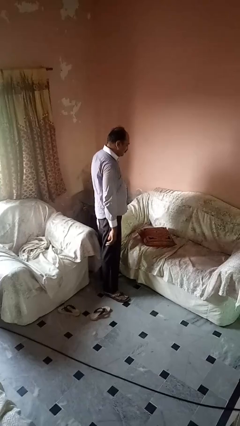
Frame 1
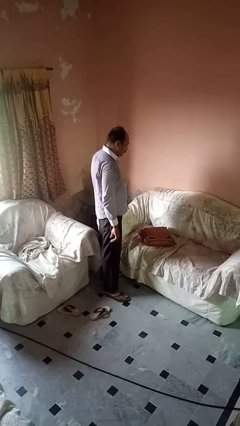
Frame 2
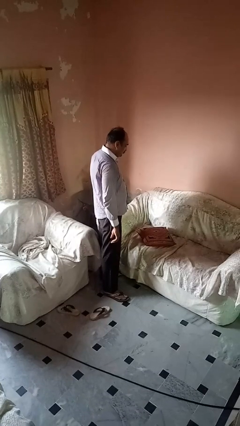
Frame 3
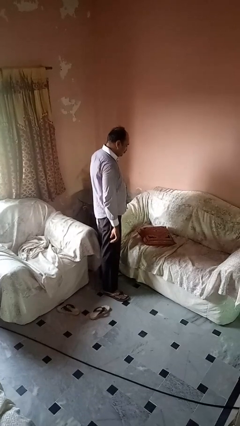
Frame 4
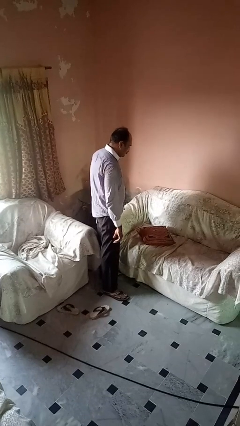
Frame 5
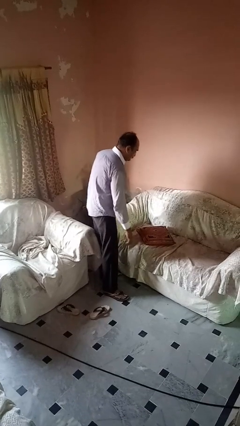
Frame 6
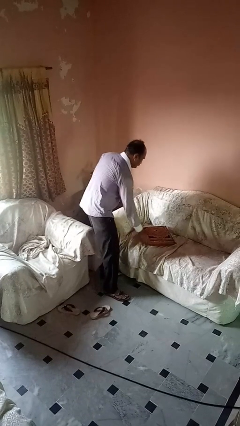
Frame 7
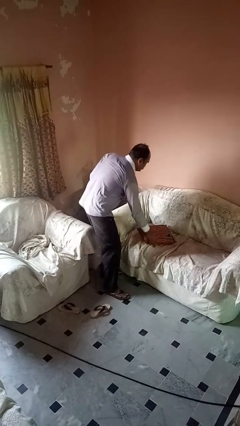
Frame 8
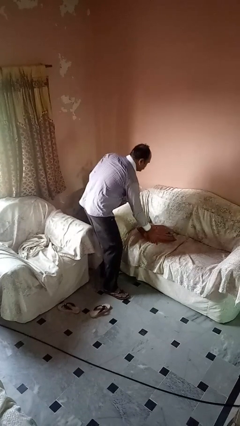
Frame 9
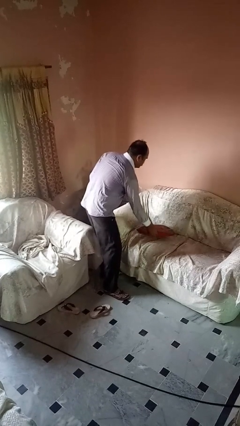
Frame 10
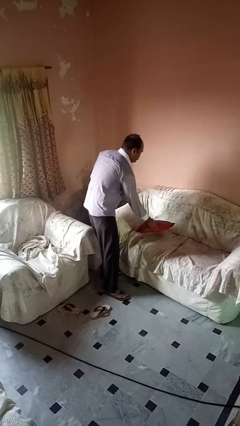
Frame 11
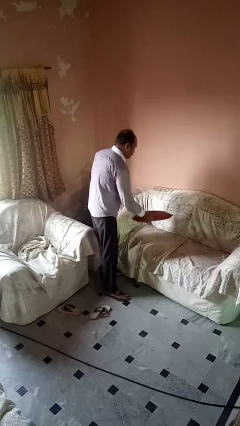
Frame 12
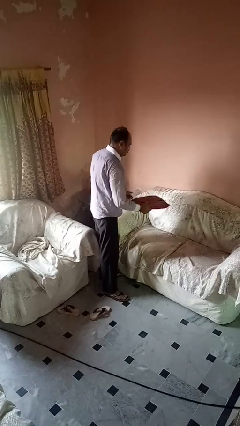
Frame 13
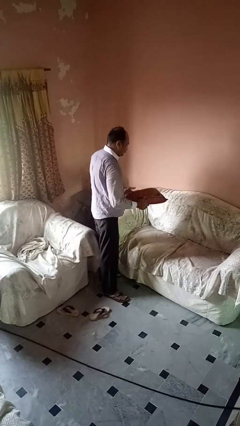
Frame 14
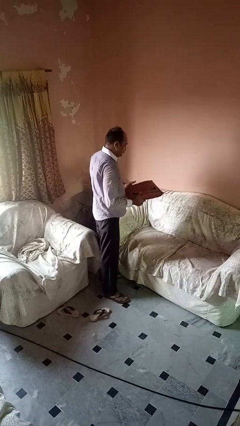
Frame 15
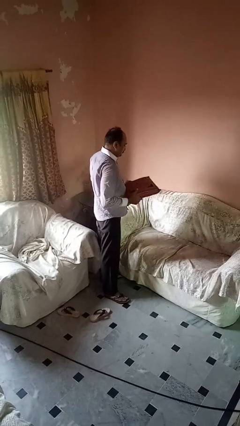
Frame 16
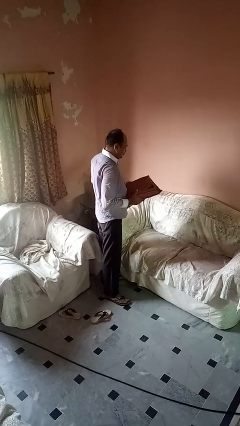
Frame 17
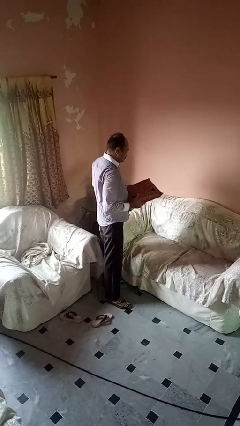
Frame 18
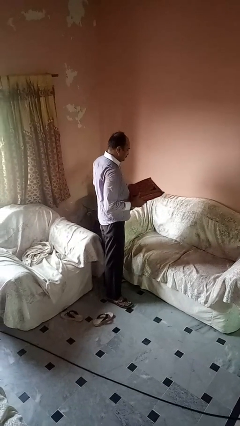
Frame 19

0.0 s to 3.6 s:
person picks up object from couch

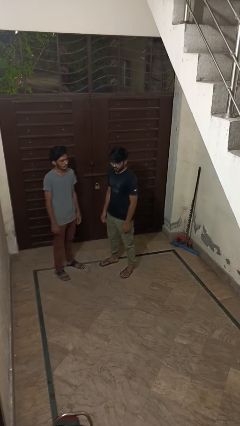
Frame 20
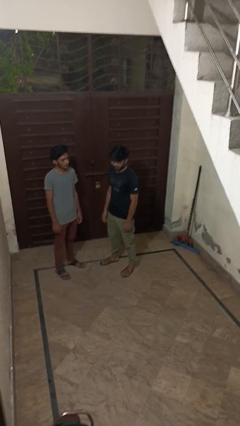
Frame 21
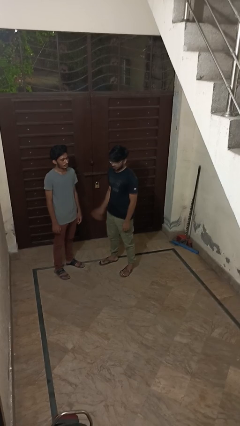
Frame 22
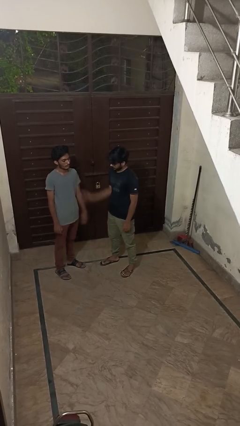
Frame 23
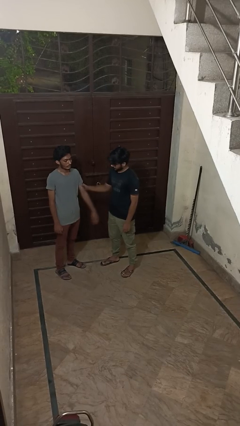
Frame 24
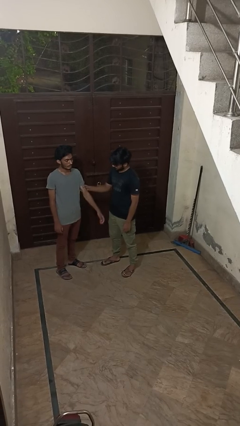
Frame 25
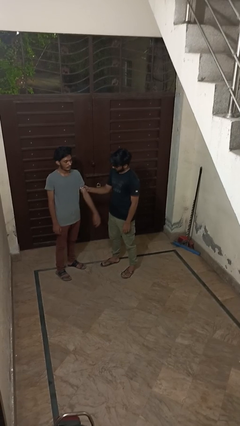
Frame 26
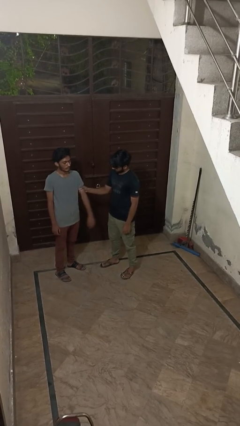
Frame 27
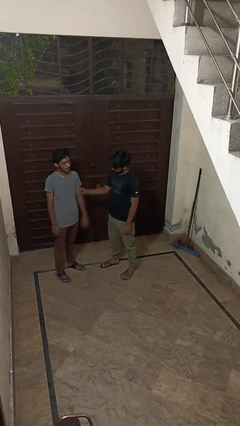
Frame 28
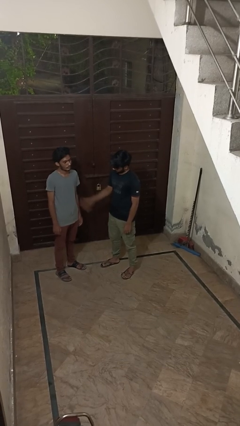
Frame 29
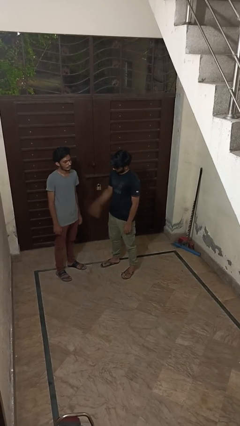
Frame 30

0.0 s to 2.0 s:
person grabs person by bicep

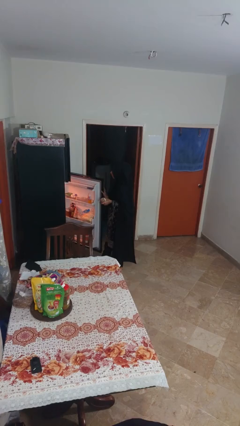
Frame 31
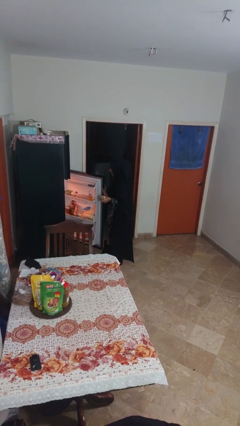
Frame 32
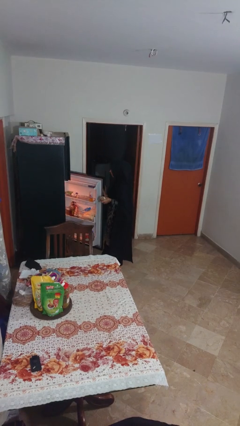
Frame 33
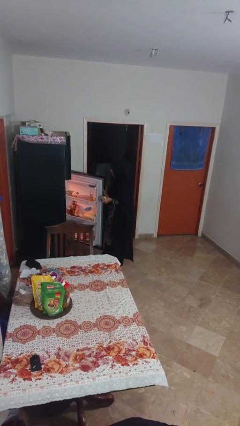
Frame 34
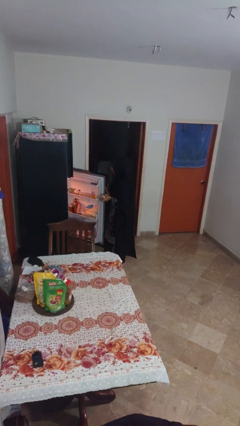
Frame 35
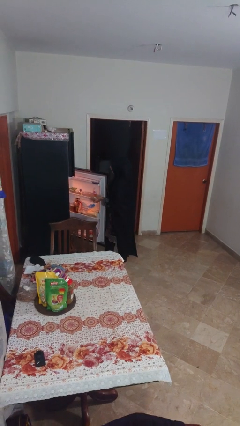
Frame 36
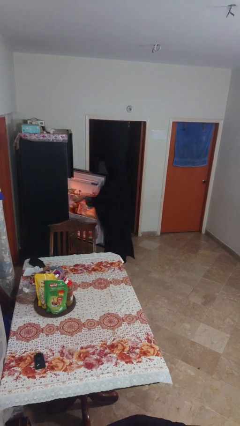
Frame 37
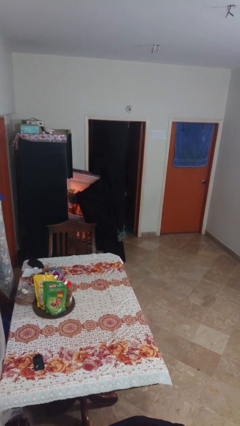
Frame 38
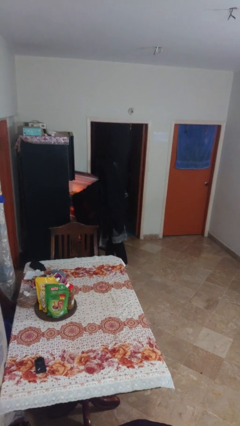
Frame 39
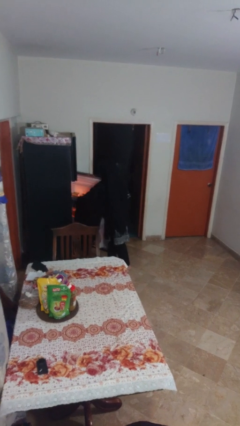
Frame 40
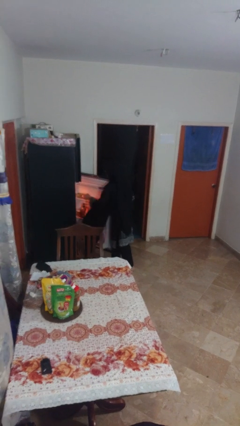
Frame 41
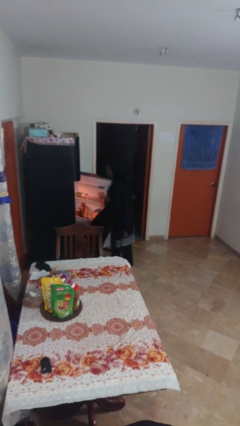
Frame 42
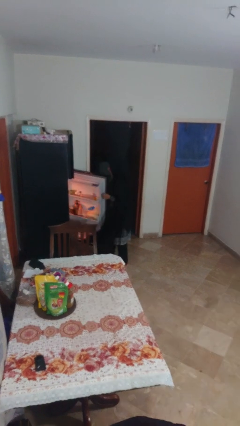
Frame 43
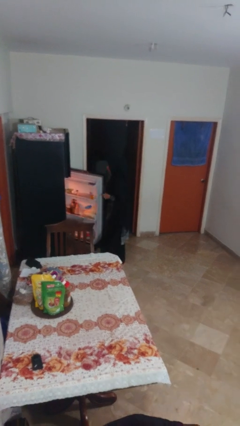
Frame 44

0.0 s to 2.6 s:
person puts object into refrigerator

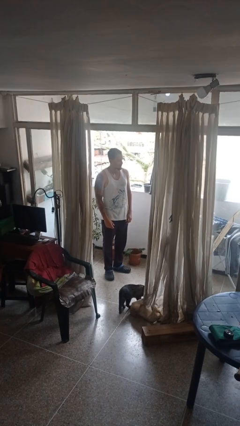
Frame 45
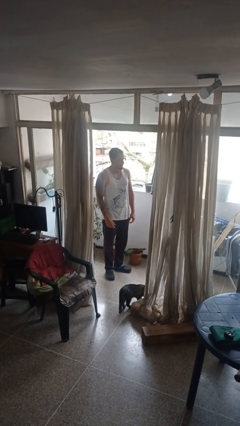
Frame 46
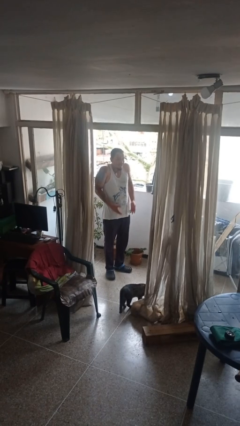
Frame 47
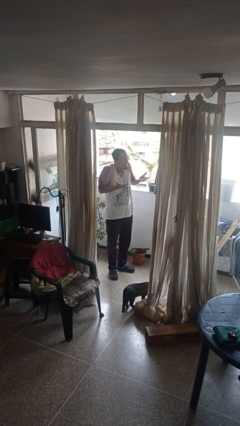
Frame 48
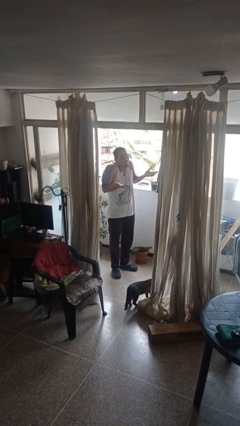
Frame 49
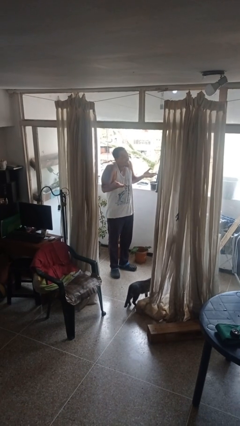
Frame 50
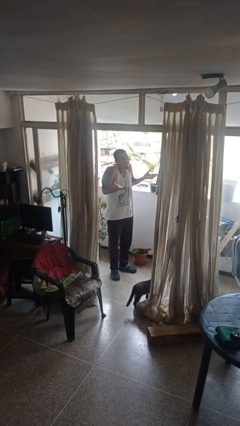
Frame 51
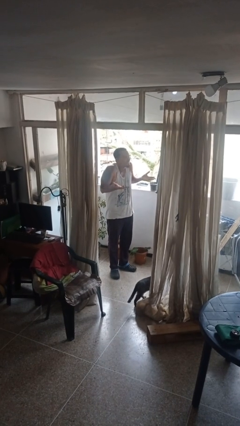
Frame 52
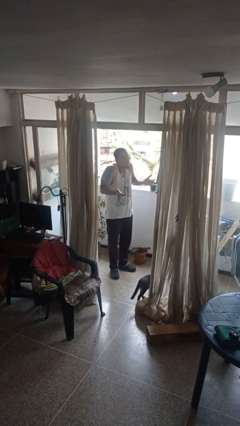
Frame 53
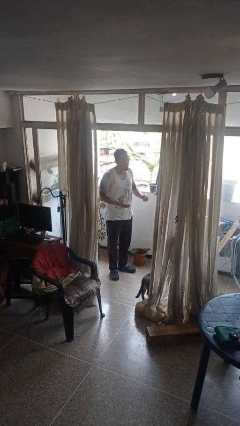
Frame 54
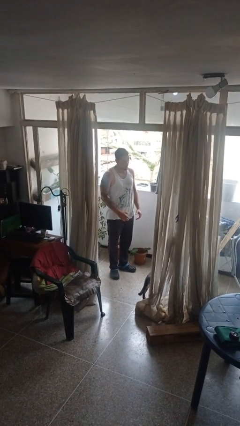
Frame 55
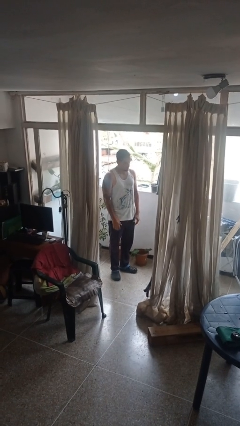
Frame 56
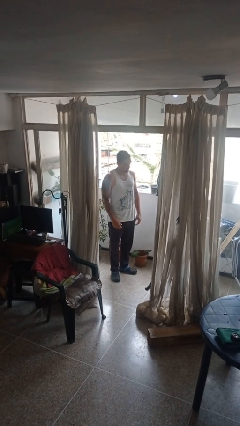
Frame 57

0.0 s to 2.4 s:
person shrugs

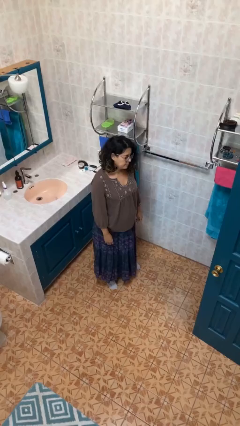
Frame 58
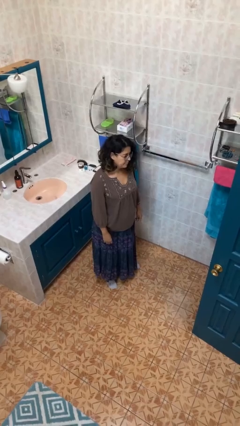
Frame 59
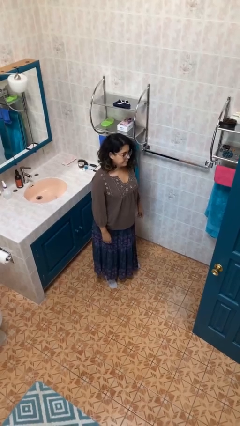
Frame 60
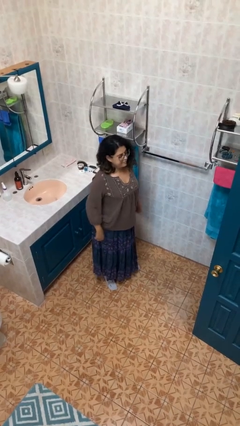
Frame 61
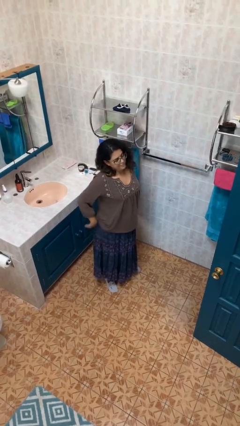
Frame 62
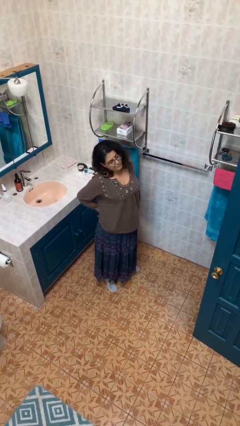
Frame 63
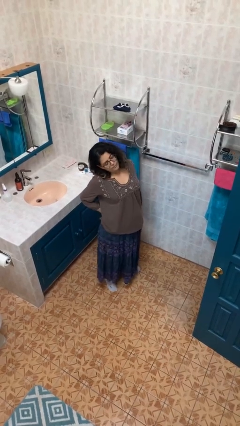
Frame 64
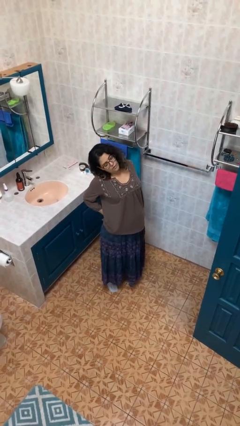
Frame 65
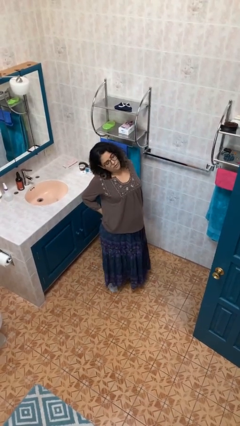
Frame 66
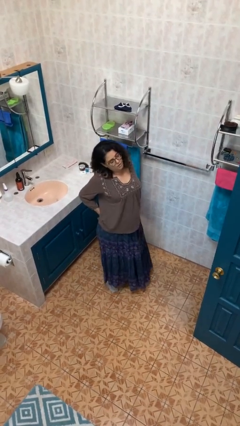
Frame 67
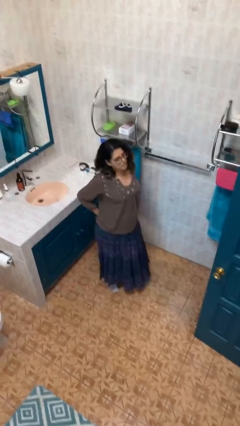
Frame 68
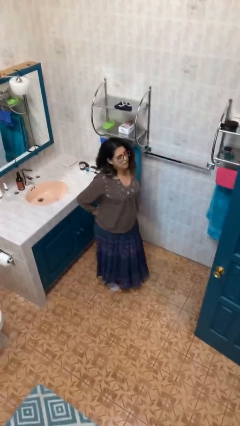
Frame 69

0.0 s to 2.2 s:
person stretches back

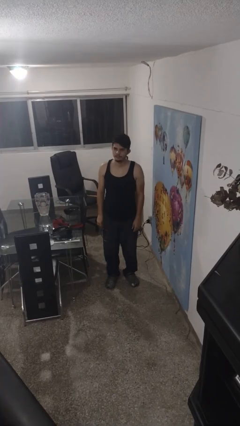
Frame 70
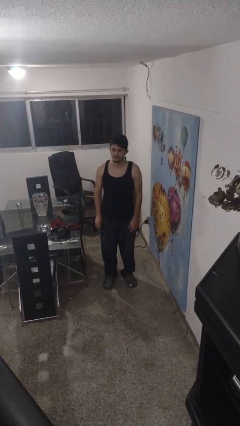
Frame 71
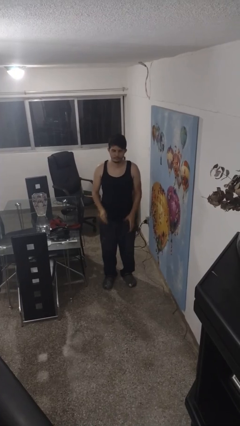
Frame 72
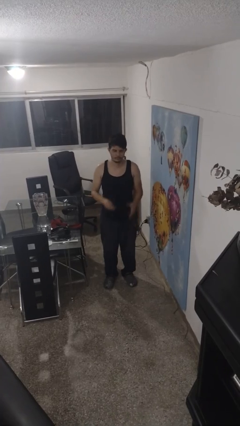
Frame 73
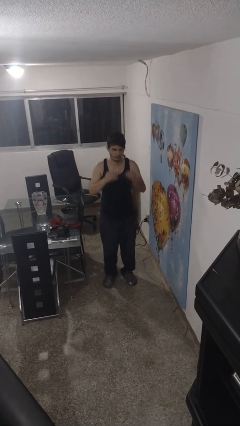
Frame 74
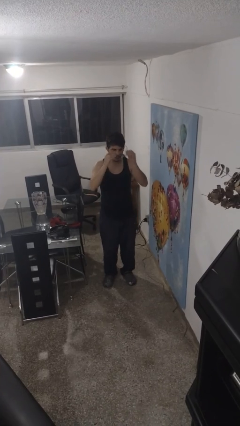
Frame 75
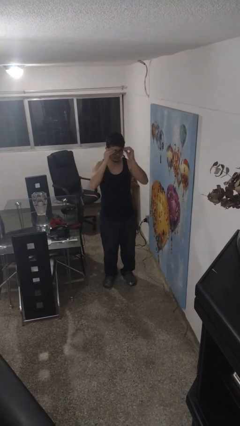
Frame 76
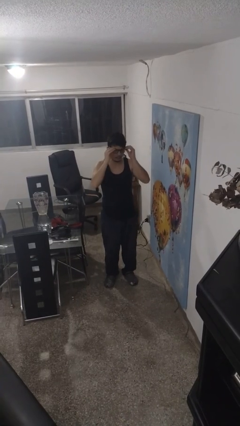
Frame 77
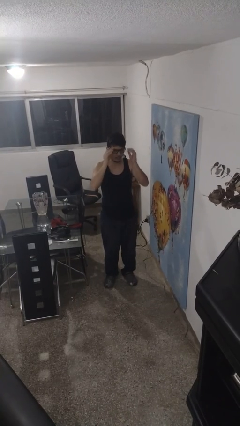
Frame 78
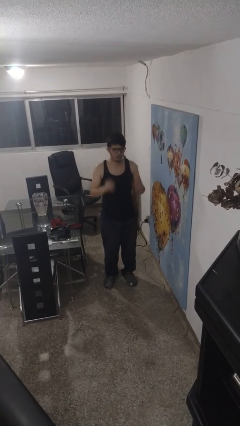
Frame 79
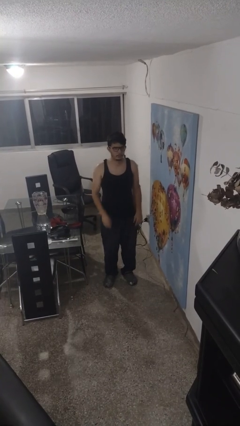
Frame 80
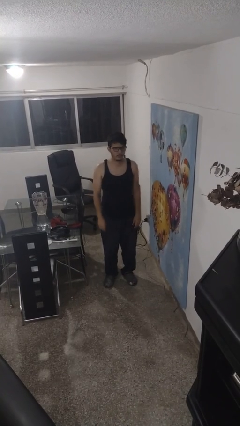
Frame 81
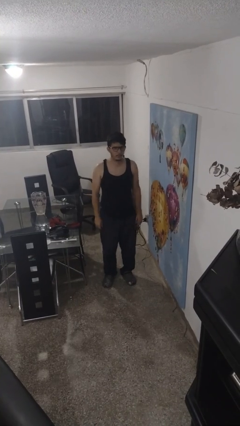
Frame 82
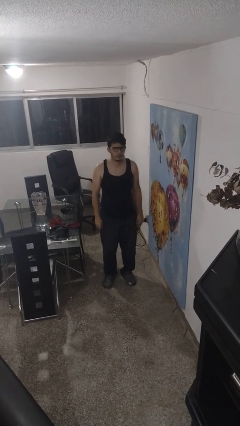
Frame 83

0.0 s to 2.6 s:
person puts on glasses

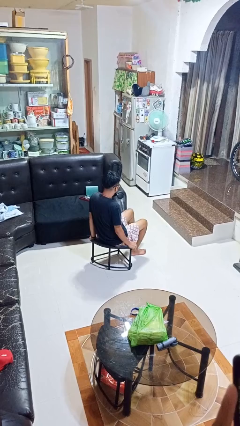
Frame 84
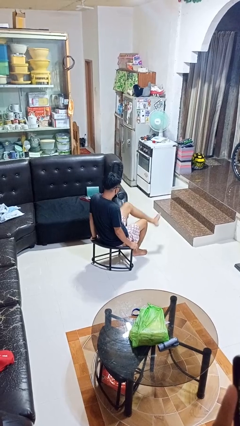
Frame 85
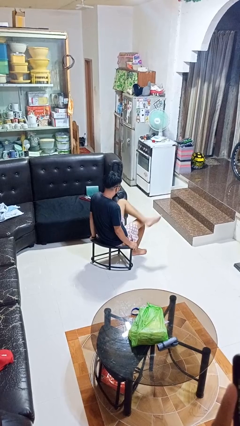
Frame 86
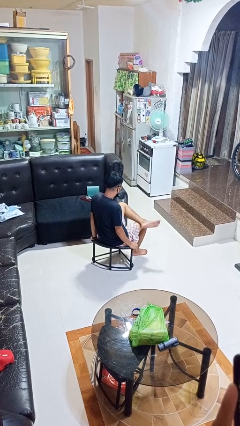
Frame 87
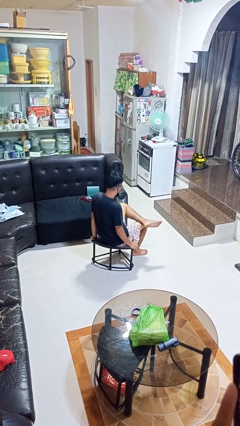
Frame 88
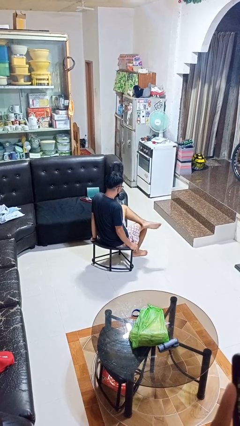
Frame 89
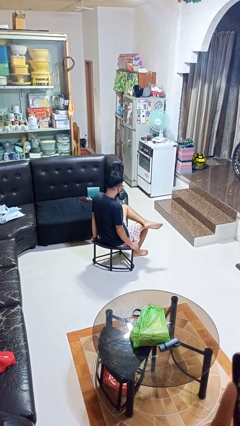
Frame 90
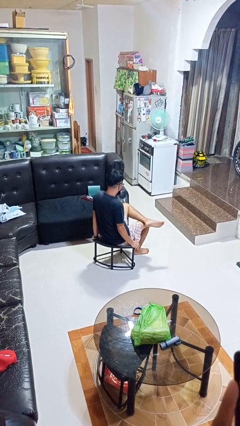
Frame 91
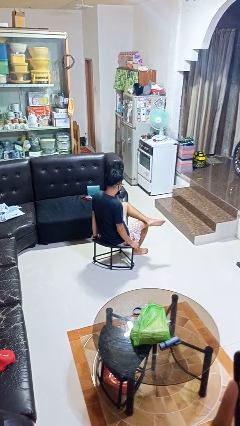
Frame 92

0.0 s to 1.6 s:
person crosses legs

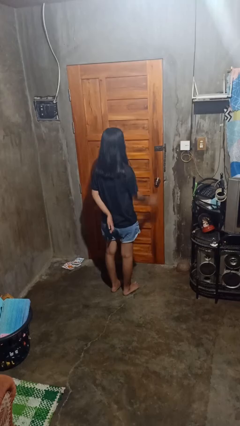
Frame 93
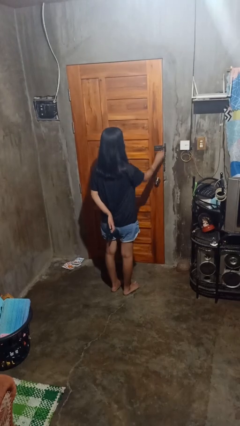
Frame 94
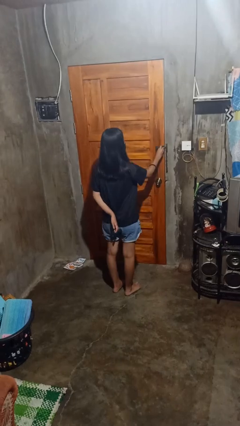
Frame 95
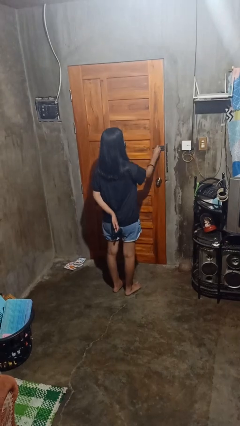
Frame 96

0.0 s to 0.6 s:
person unlocks door with keys
